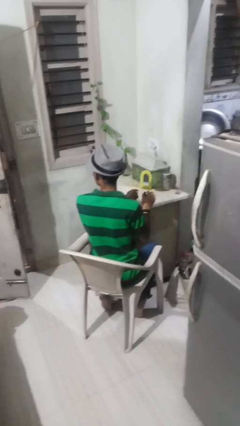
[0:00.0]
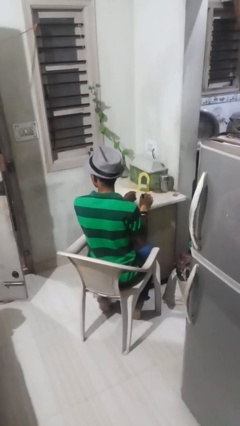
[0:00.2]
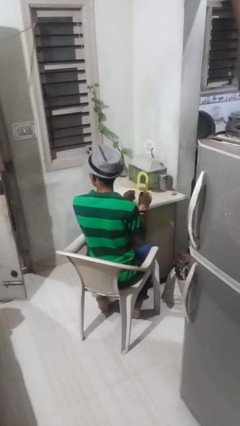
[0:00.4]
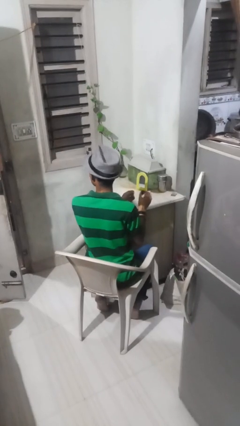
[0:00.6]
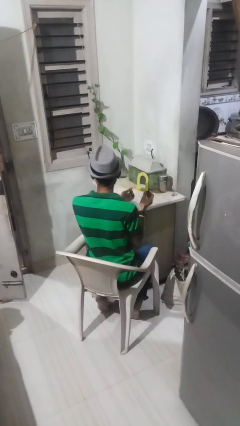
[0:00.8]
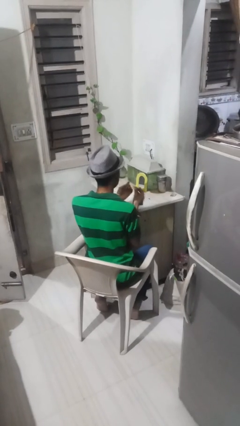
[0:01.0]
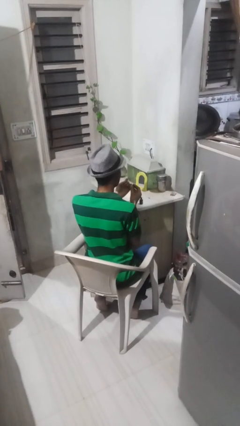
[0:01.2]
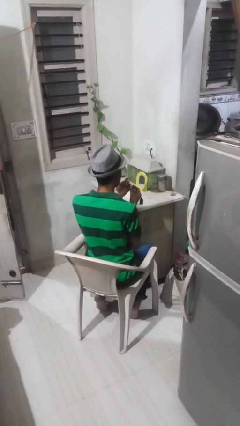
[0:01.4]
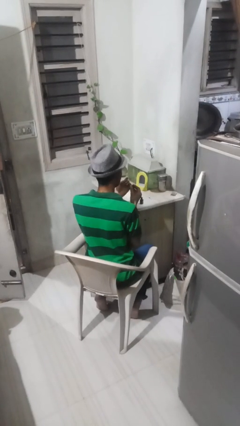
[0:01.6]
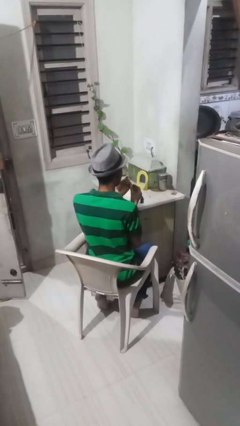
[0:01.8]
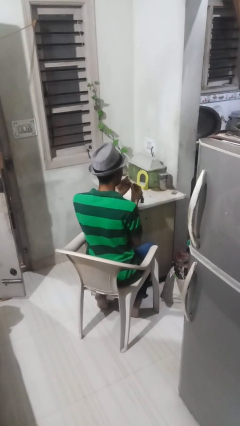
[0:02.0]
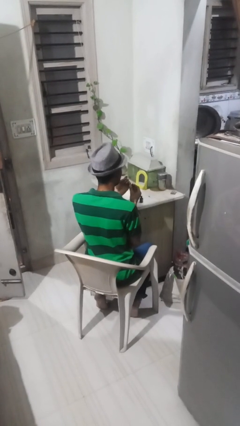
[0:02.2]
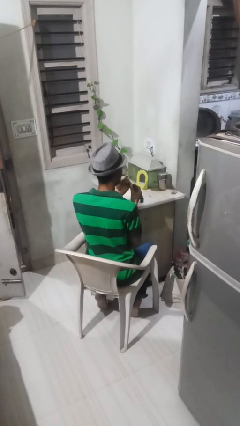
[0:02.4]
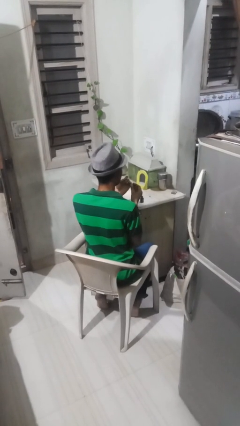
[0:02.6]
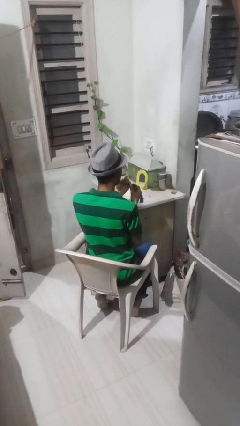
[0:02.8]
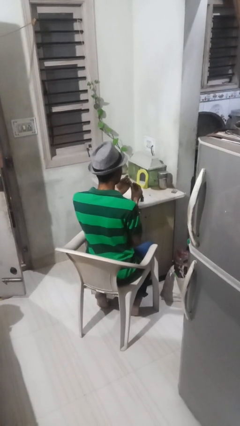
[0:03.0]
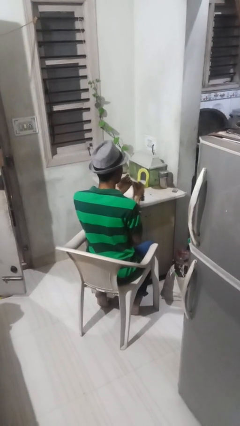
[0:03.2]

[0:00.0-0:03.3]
person paints fingernails

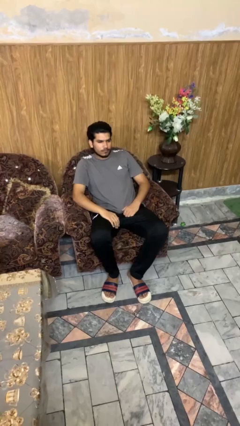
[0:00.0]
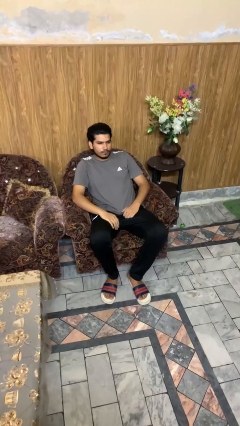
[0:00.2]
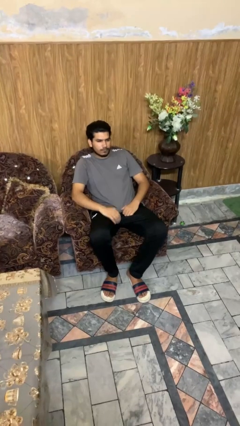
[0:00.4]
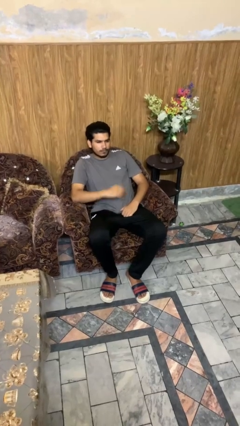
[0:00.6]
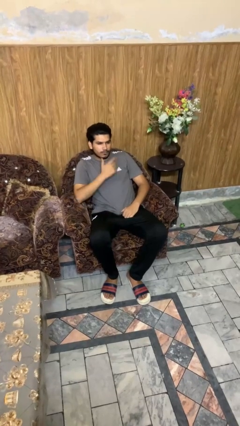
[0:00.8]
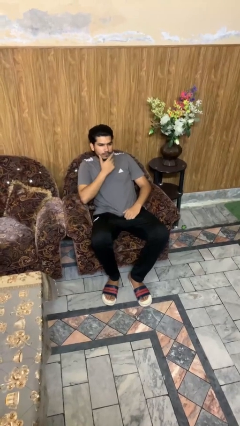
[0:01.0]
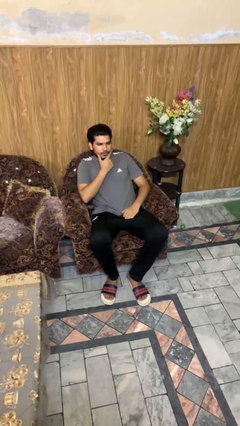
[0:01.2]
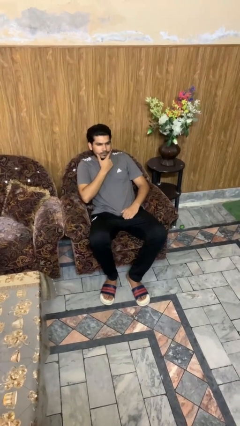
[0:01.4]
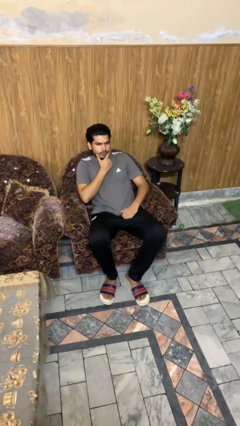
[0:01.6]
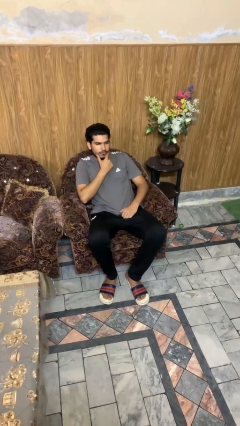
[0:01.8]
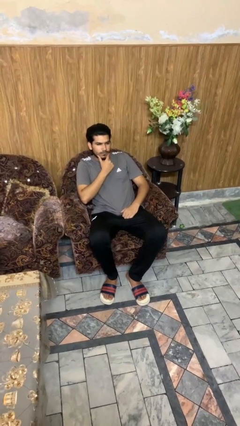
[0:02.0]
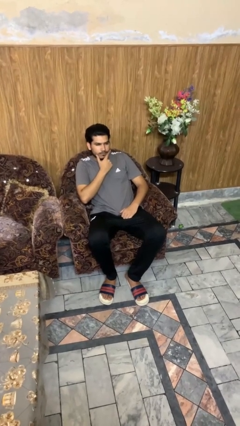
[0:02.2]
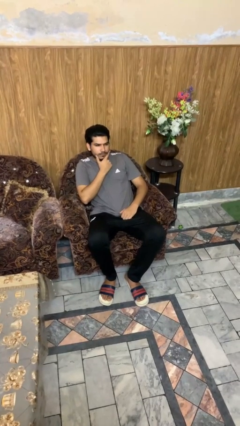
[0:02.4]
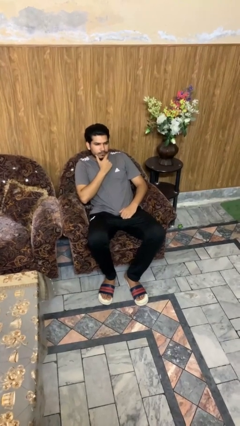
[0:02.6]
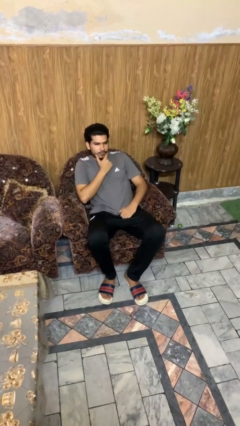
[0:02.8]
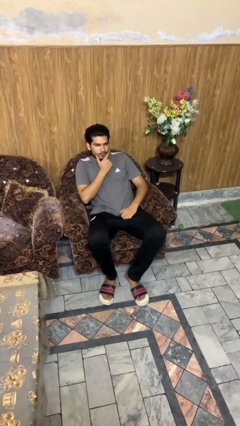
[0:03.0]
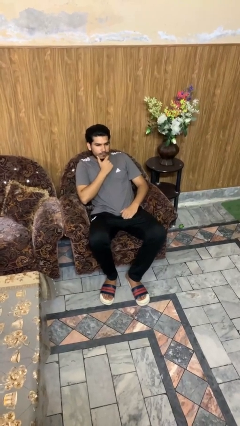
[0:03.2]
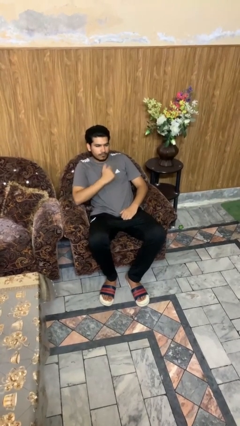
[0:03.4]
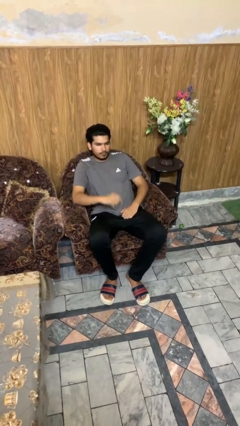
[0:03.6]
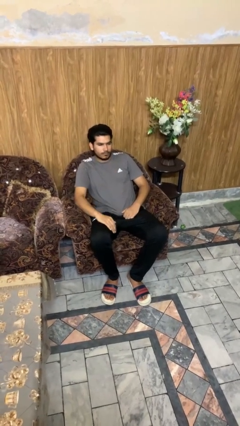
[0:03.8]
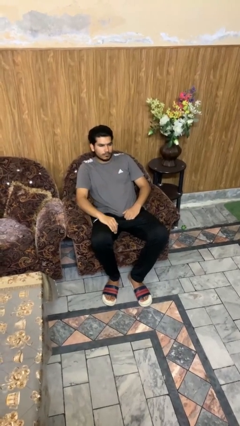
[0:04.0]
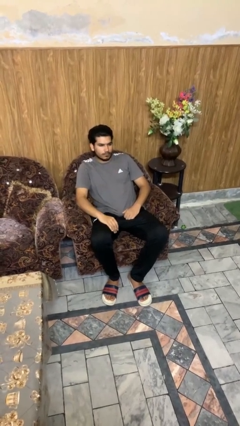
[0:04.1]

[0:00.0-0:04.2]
person strokes chin

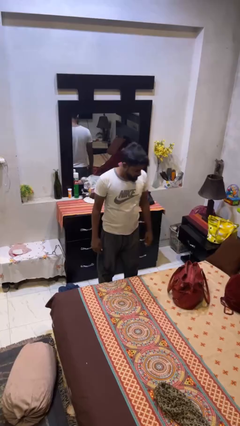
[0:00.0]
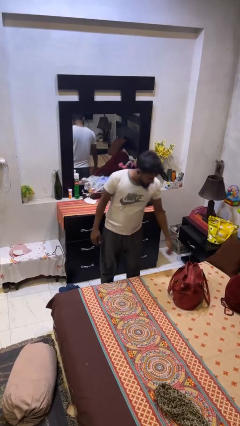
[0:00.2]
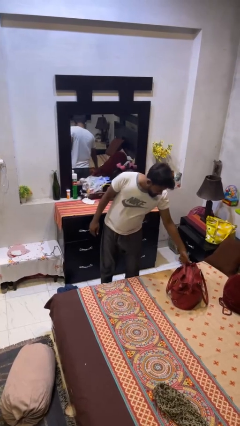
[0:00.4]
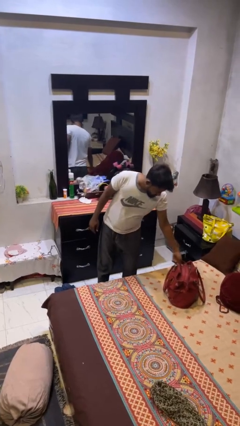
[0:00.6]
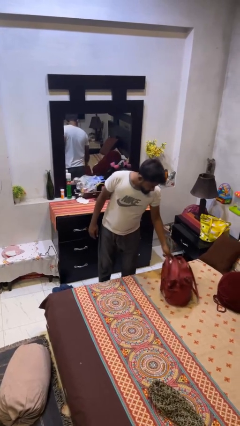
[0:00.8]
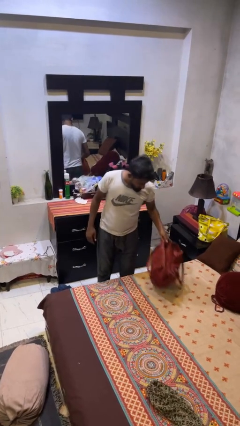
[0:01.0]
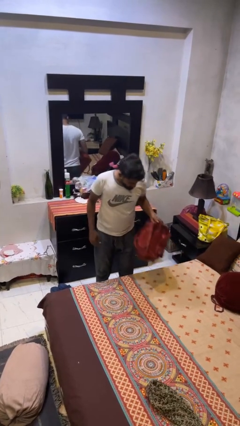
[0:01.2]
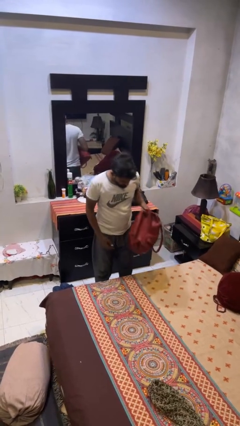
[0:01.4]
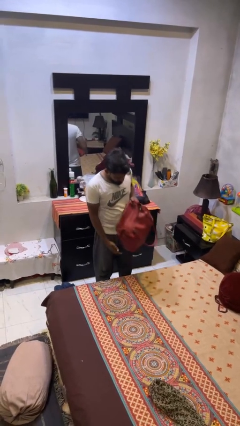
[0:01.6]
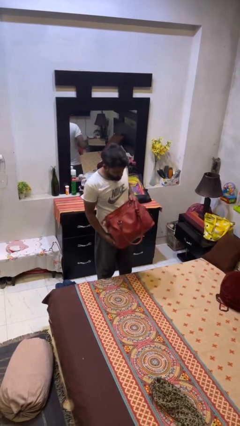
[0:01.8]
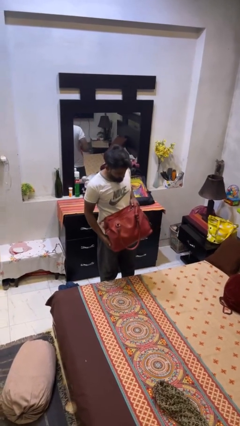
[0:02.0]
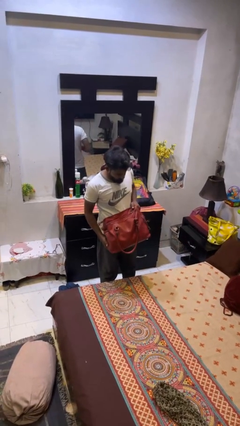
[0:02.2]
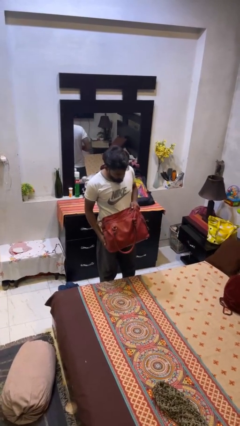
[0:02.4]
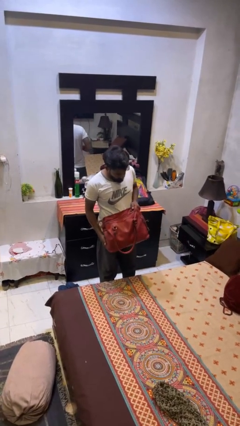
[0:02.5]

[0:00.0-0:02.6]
person picks up object from bed

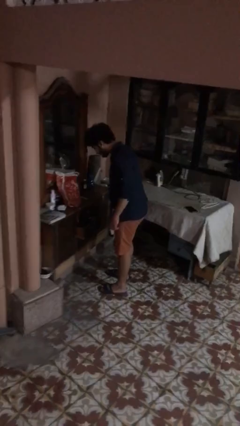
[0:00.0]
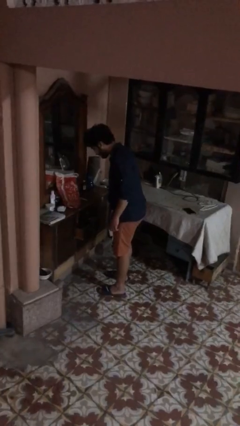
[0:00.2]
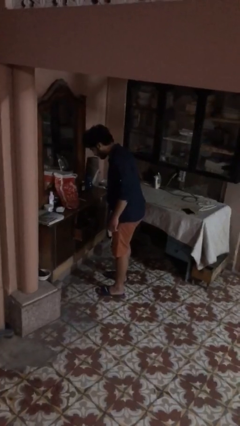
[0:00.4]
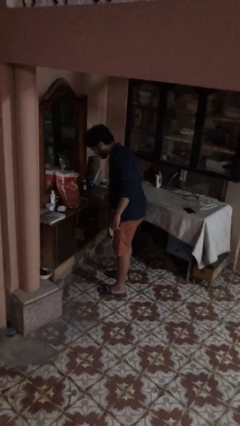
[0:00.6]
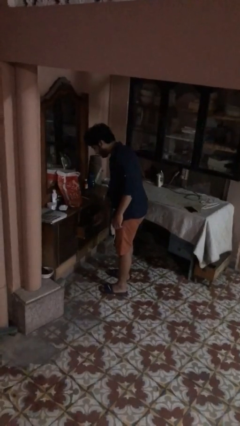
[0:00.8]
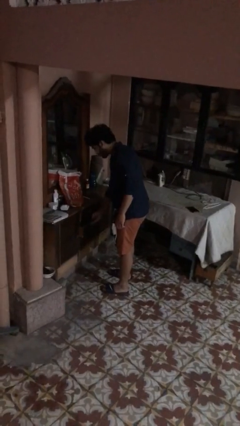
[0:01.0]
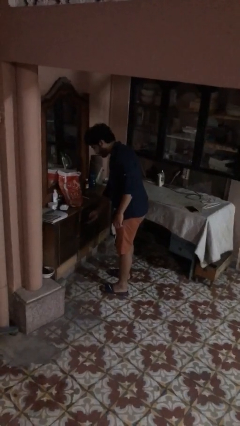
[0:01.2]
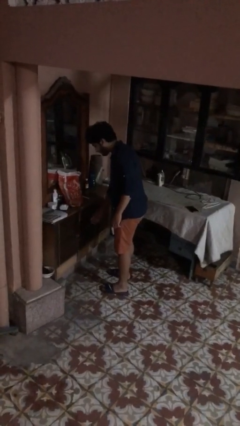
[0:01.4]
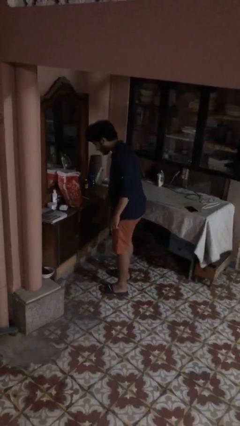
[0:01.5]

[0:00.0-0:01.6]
person closes dresser drawer

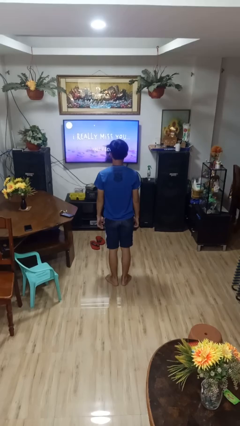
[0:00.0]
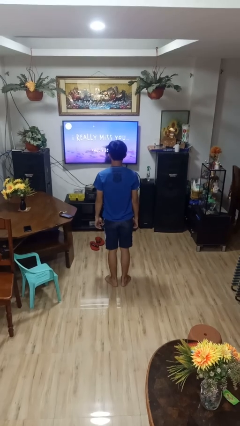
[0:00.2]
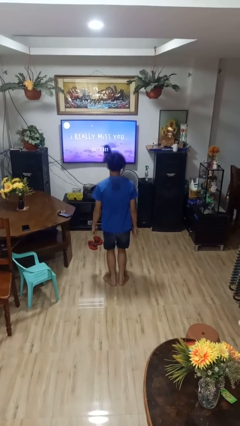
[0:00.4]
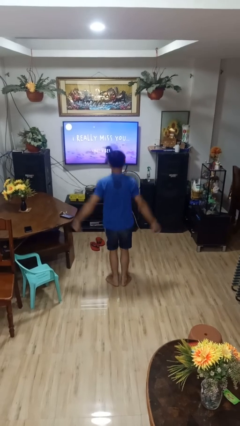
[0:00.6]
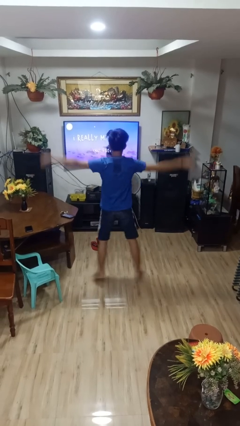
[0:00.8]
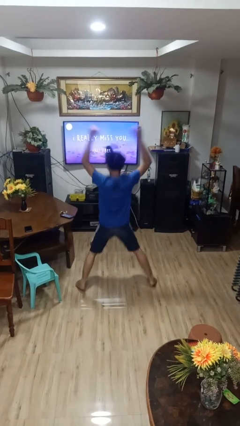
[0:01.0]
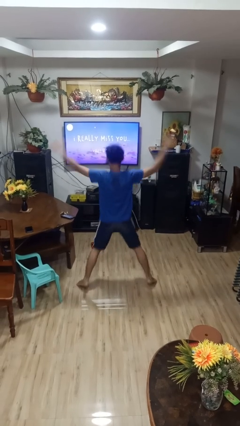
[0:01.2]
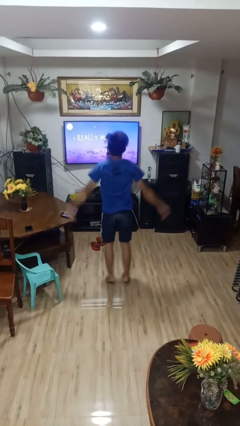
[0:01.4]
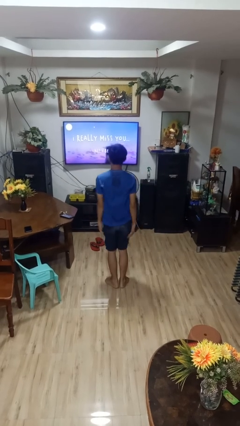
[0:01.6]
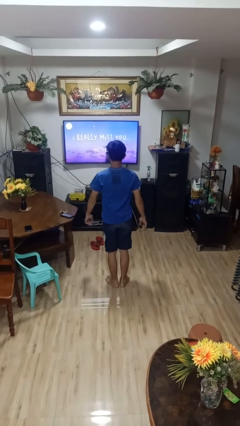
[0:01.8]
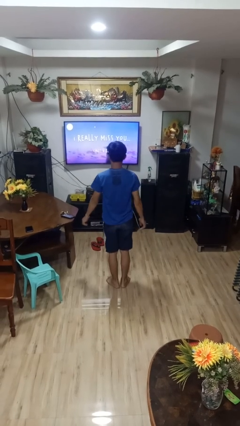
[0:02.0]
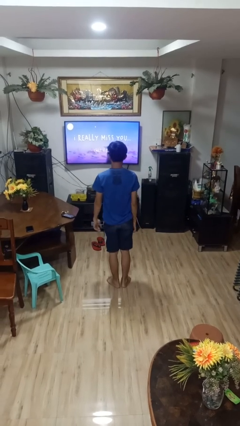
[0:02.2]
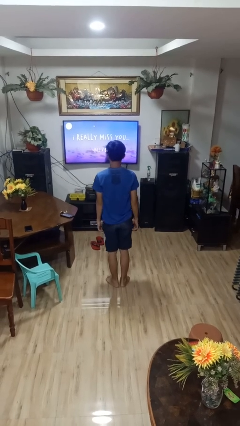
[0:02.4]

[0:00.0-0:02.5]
person exercises with jumping jacks

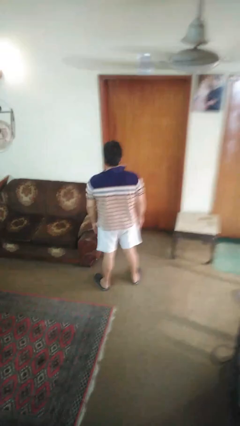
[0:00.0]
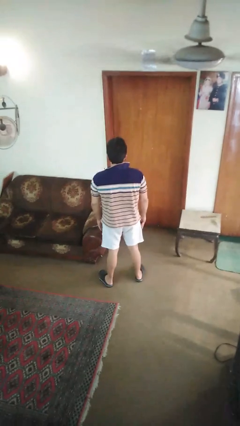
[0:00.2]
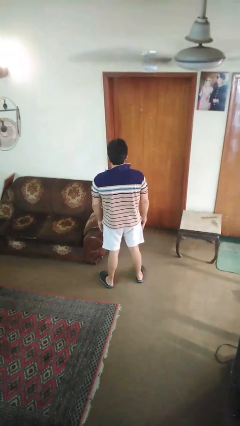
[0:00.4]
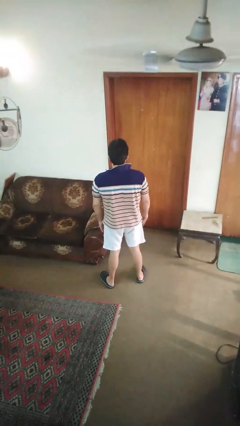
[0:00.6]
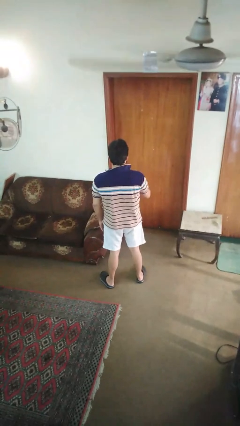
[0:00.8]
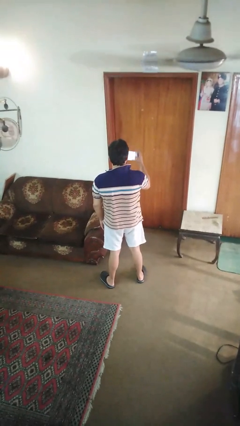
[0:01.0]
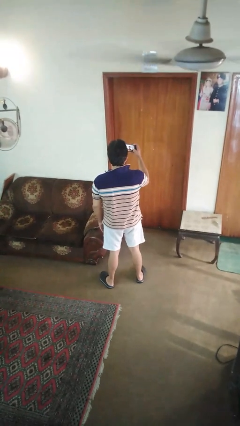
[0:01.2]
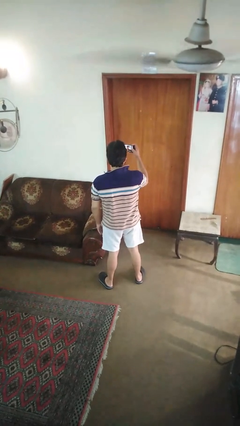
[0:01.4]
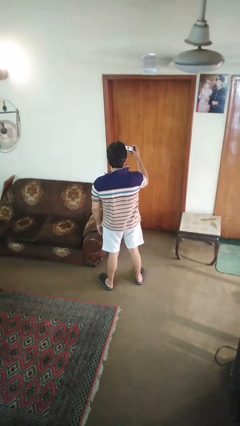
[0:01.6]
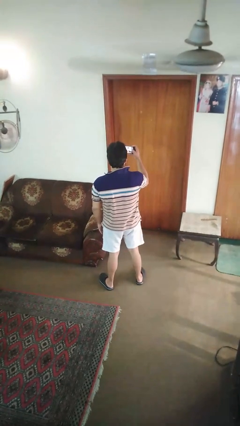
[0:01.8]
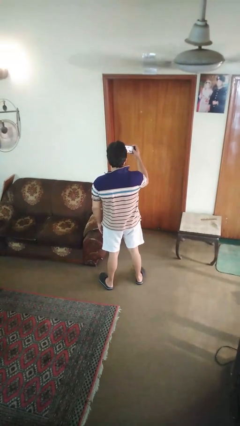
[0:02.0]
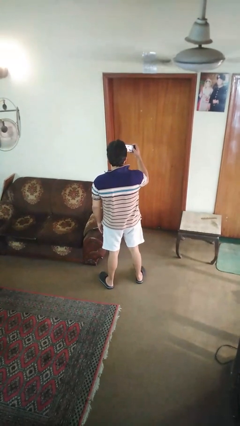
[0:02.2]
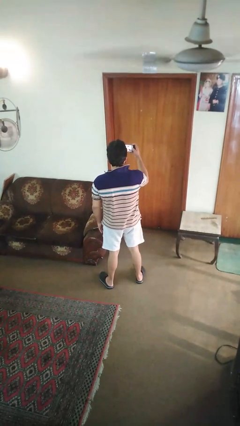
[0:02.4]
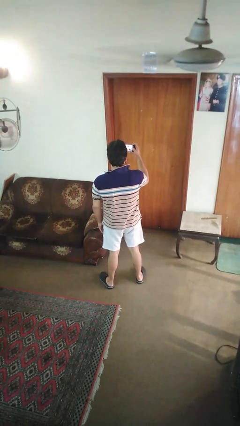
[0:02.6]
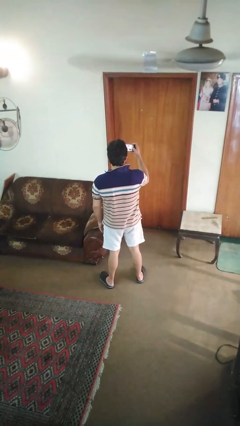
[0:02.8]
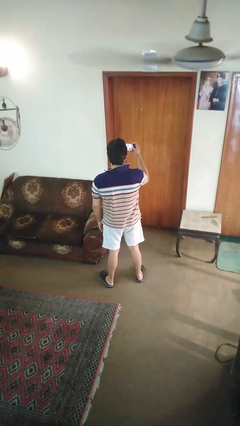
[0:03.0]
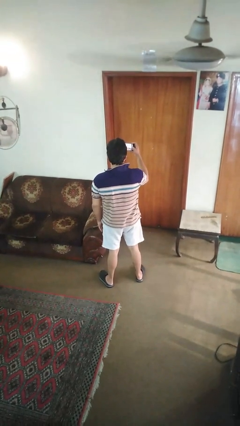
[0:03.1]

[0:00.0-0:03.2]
person takes selfie

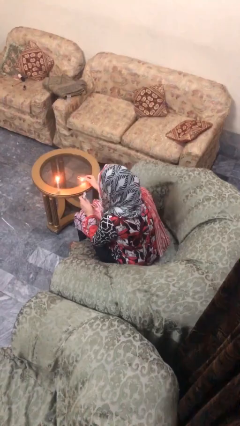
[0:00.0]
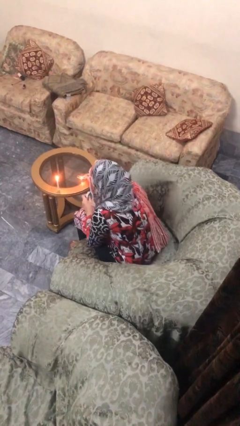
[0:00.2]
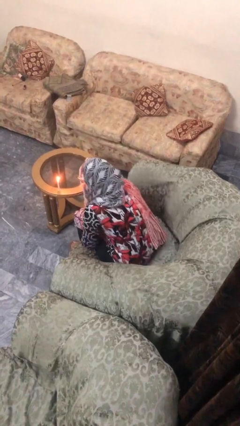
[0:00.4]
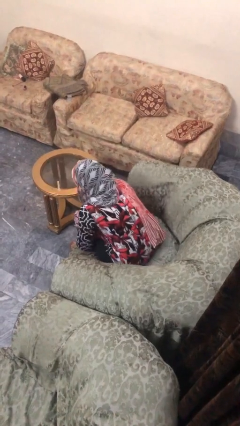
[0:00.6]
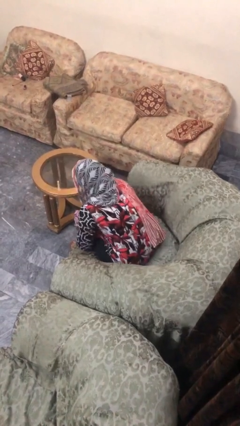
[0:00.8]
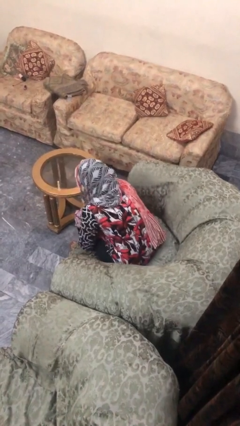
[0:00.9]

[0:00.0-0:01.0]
person extinguishes candle
